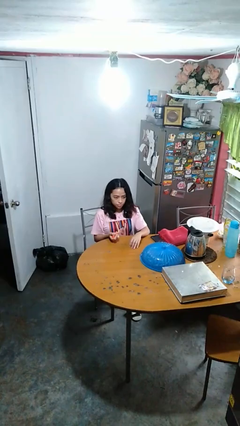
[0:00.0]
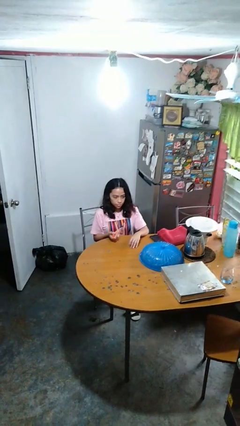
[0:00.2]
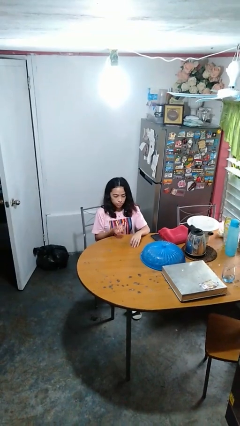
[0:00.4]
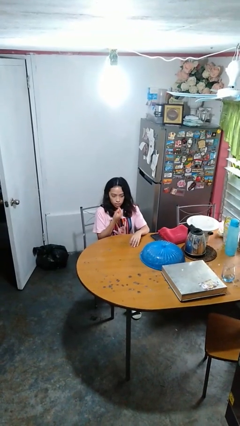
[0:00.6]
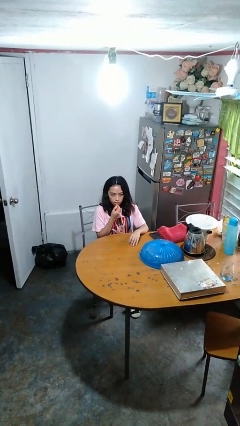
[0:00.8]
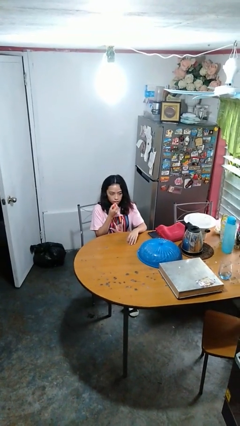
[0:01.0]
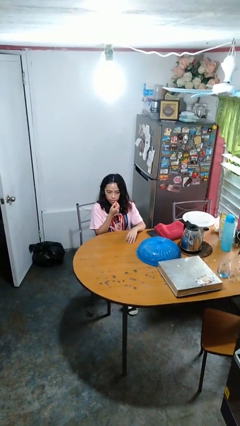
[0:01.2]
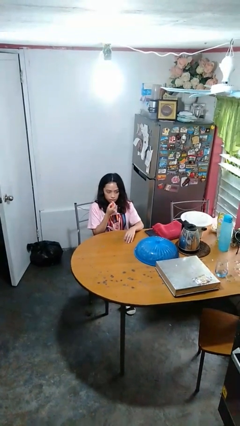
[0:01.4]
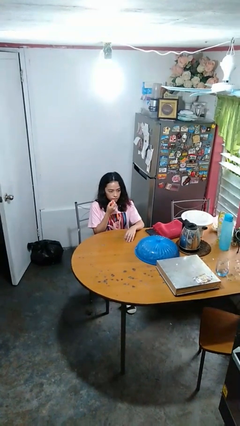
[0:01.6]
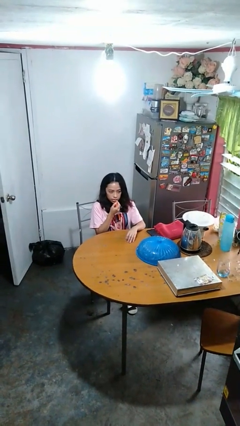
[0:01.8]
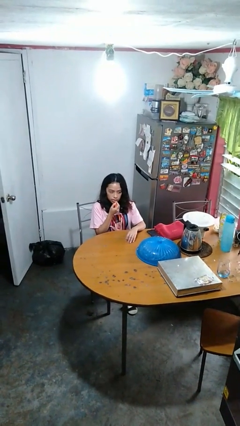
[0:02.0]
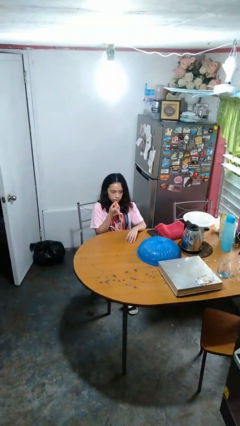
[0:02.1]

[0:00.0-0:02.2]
person applies lip makeup

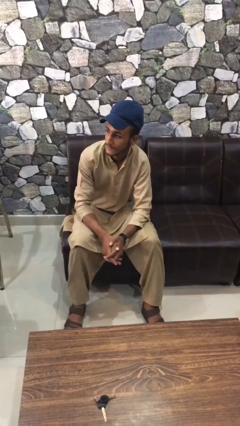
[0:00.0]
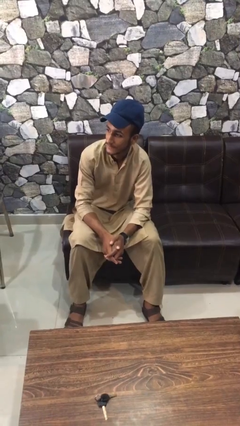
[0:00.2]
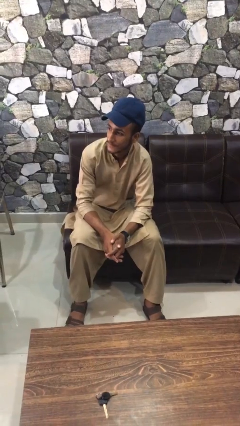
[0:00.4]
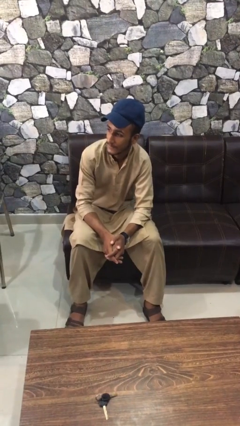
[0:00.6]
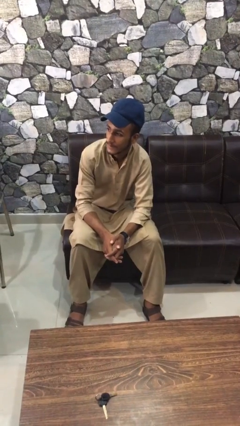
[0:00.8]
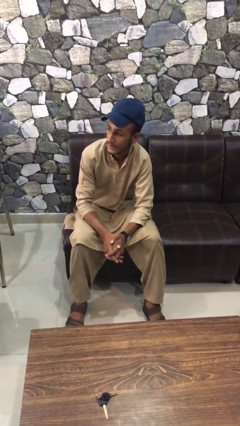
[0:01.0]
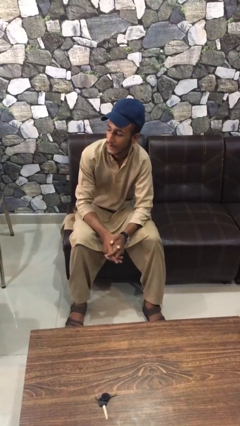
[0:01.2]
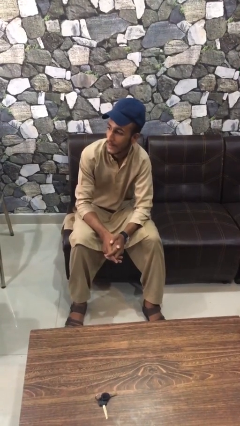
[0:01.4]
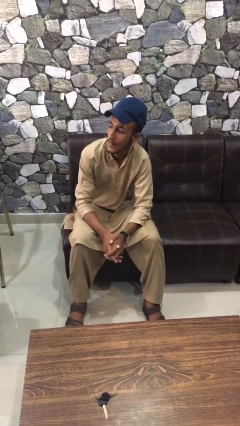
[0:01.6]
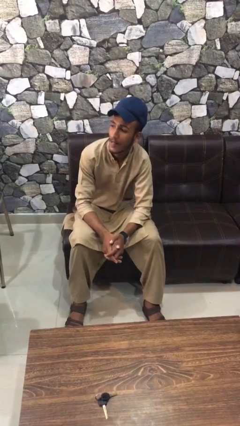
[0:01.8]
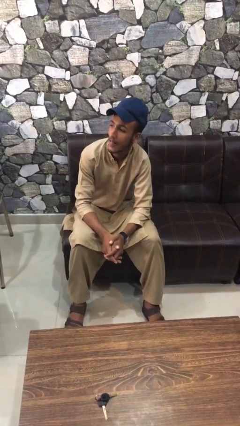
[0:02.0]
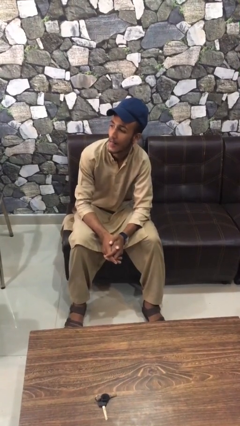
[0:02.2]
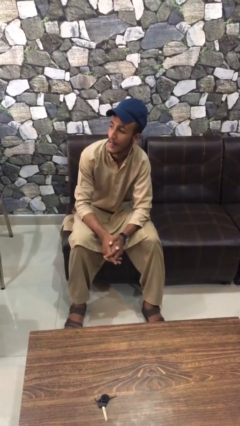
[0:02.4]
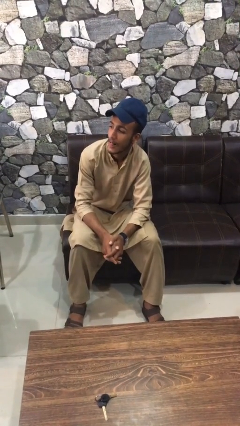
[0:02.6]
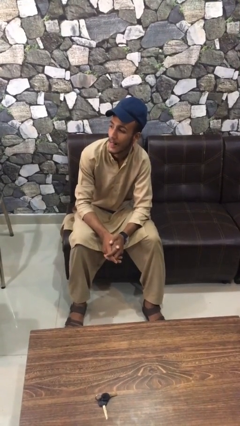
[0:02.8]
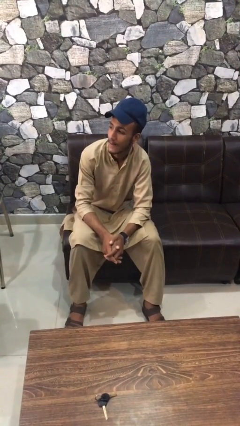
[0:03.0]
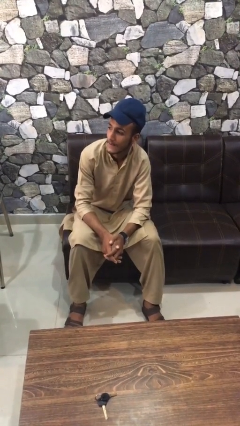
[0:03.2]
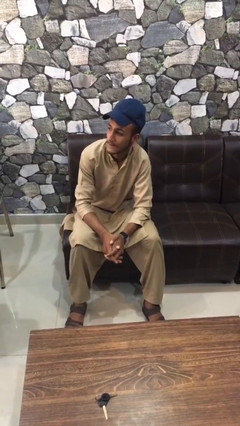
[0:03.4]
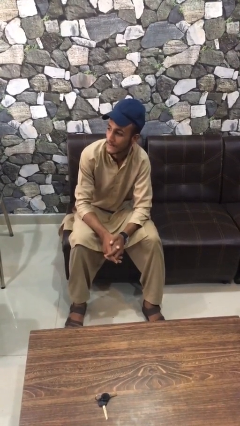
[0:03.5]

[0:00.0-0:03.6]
person sticks out tongue

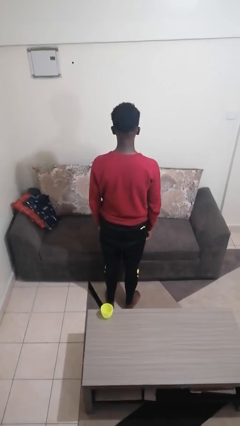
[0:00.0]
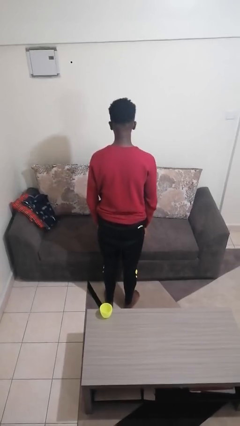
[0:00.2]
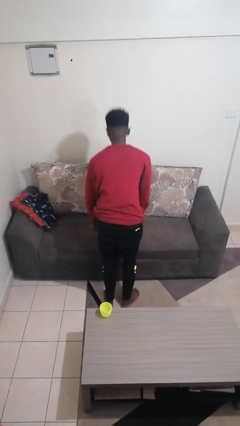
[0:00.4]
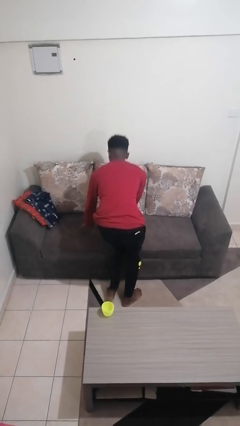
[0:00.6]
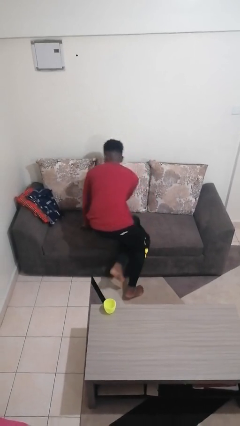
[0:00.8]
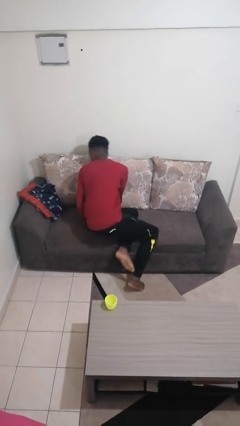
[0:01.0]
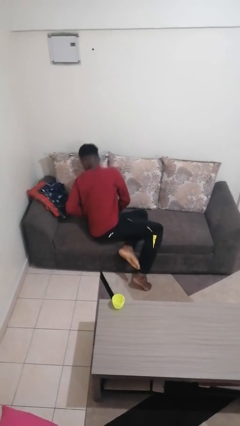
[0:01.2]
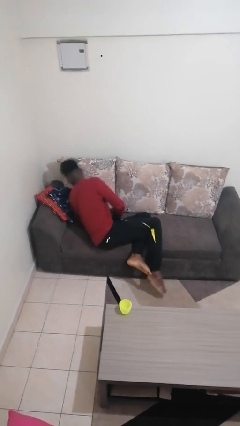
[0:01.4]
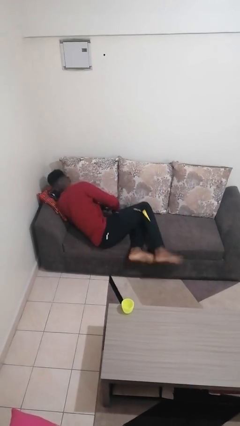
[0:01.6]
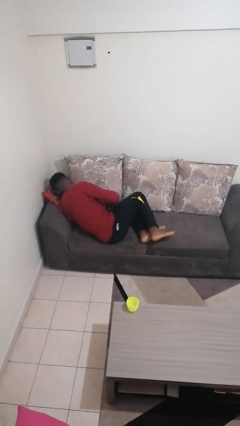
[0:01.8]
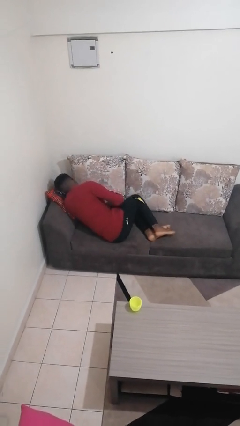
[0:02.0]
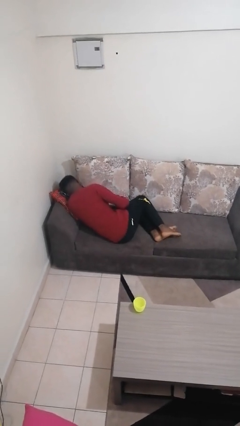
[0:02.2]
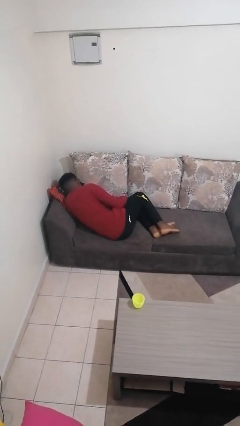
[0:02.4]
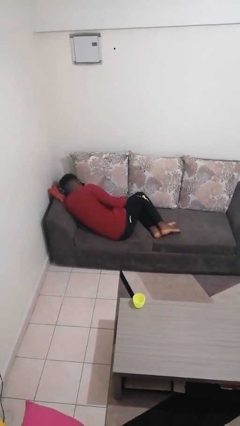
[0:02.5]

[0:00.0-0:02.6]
person lies down on couch

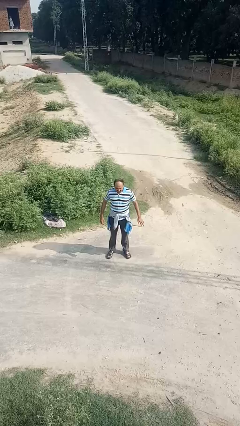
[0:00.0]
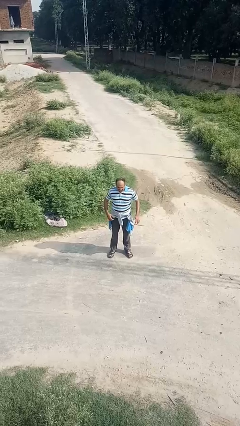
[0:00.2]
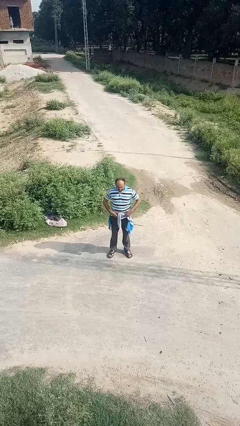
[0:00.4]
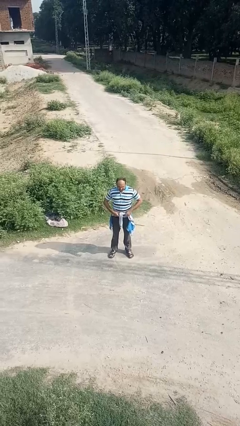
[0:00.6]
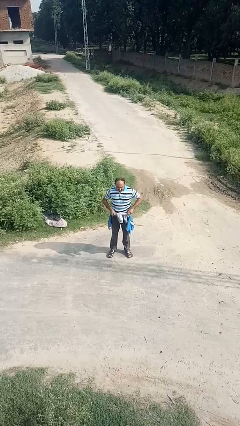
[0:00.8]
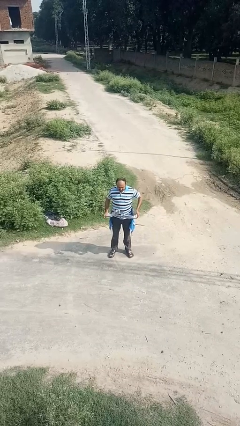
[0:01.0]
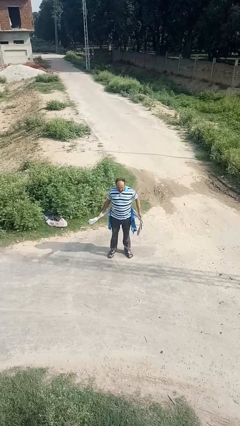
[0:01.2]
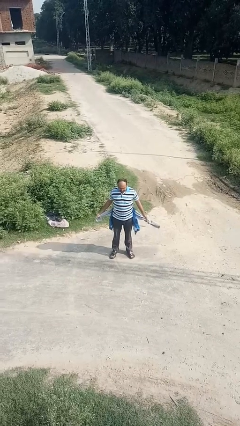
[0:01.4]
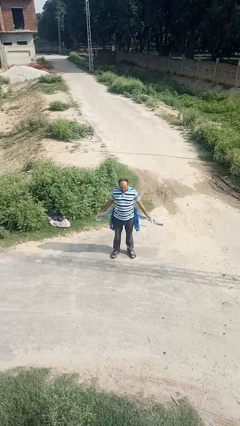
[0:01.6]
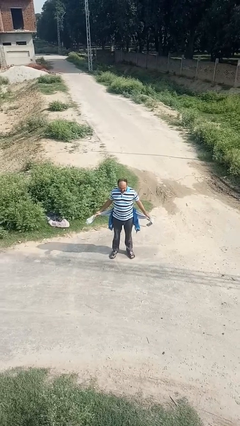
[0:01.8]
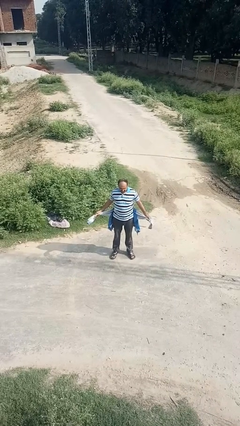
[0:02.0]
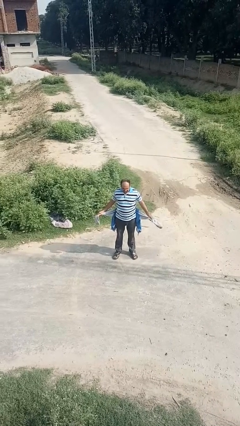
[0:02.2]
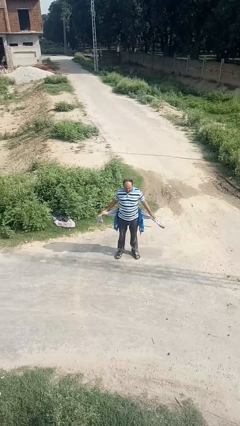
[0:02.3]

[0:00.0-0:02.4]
person unties jacket around waist

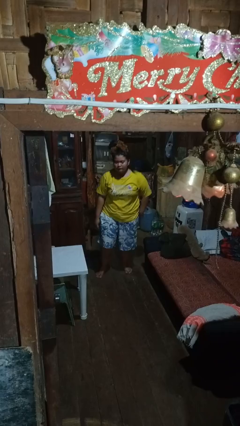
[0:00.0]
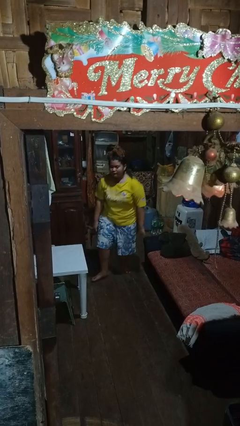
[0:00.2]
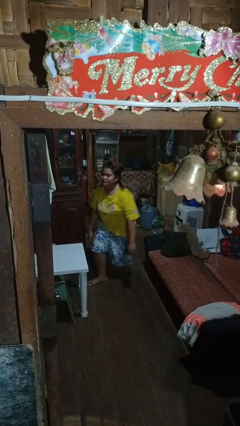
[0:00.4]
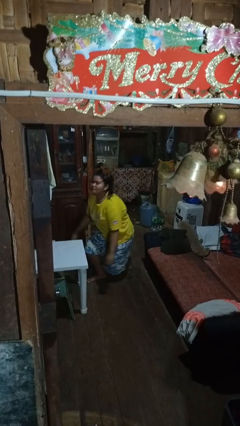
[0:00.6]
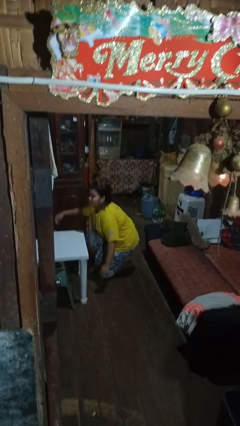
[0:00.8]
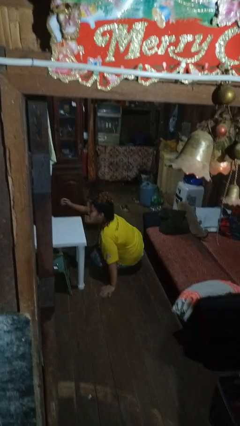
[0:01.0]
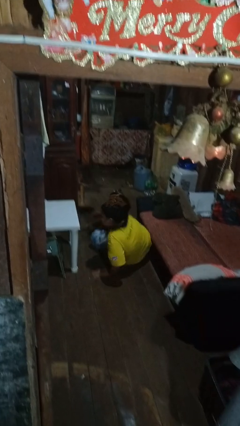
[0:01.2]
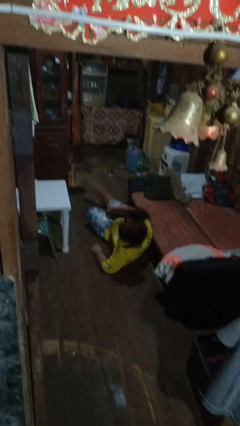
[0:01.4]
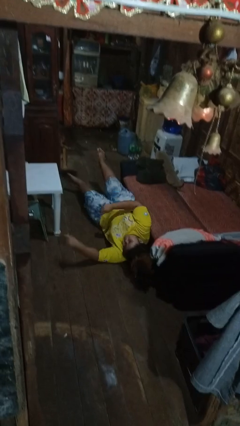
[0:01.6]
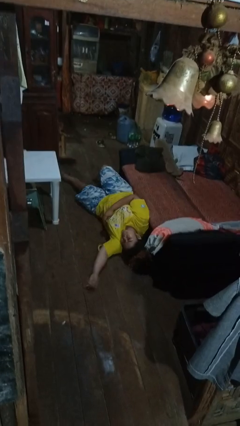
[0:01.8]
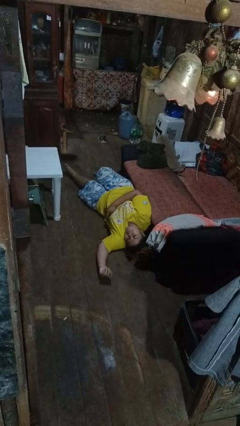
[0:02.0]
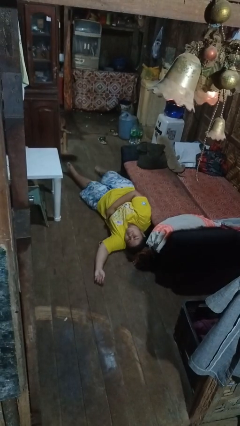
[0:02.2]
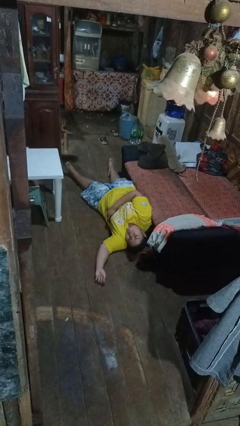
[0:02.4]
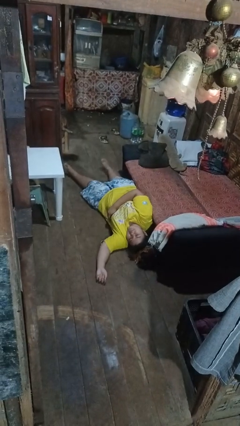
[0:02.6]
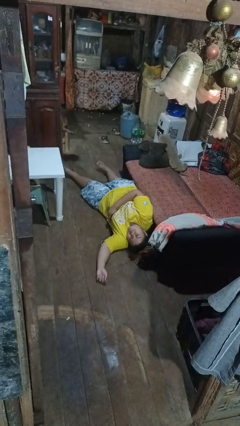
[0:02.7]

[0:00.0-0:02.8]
person falls while standing

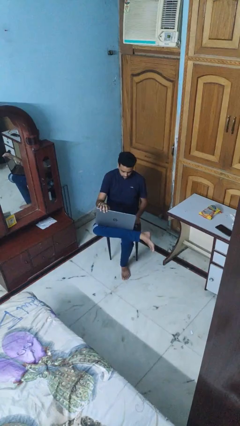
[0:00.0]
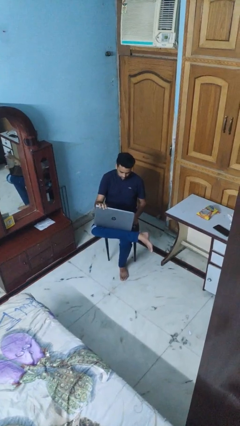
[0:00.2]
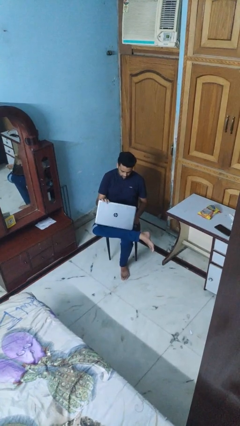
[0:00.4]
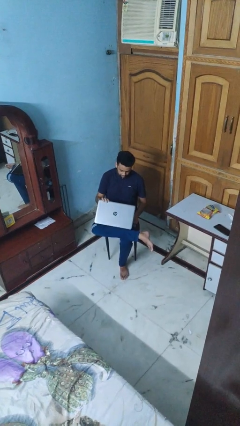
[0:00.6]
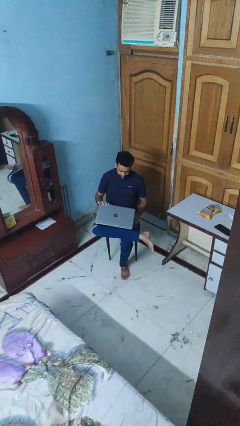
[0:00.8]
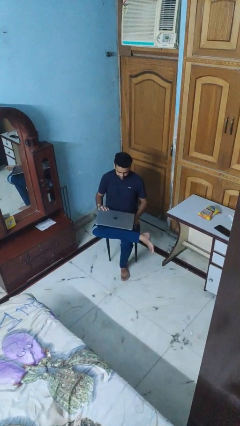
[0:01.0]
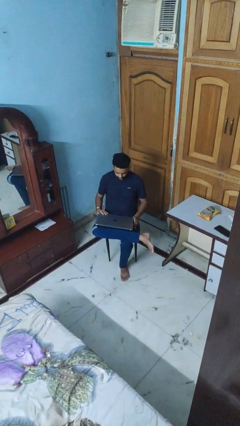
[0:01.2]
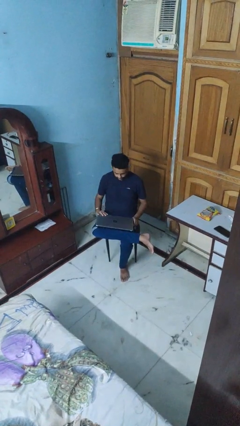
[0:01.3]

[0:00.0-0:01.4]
person closes laptop

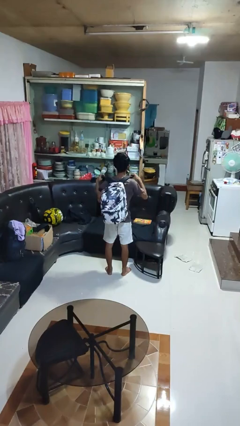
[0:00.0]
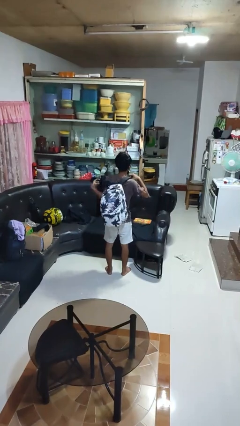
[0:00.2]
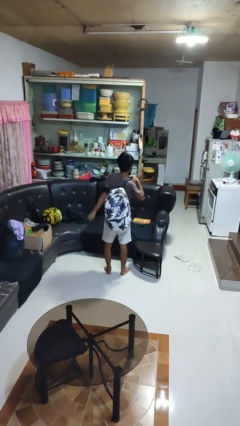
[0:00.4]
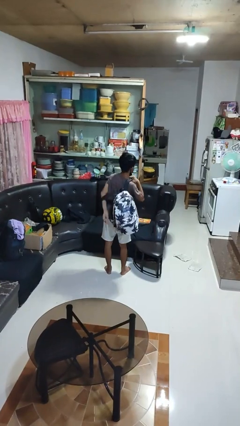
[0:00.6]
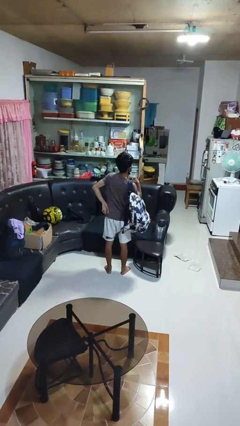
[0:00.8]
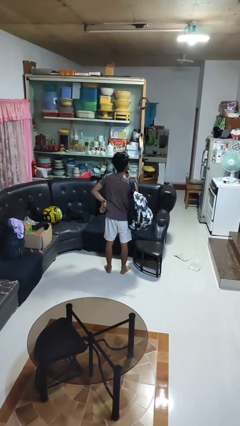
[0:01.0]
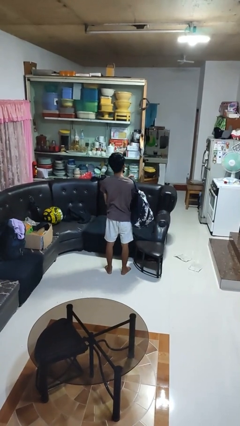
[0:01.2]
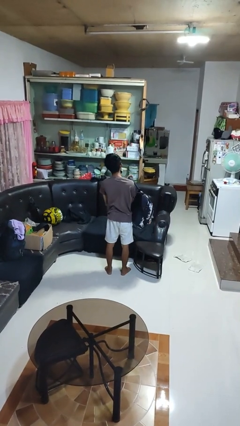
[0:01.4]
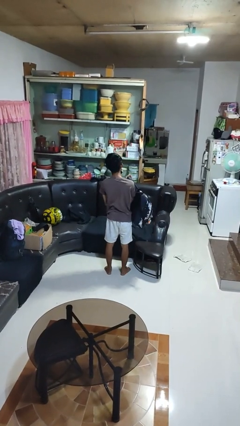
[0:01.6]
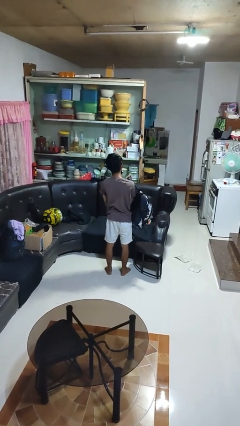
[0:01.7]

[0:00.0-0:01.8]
person takes off backpack

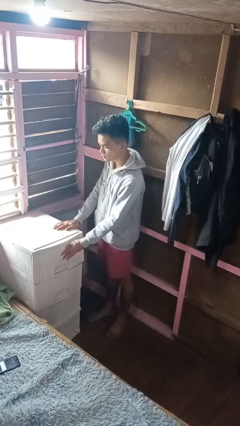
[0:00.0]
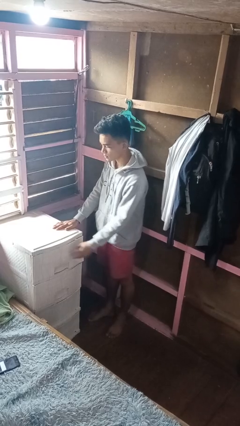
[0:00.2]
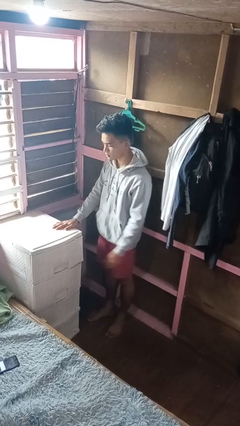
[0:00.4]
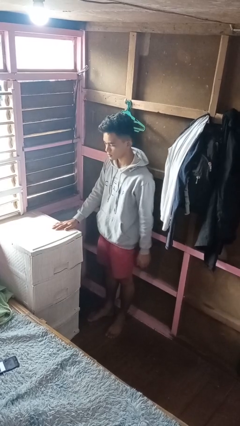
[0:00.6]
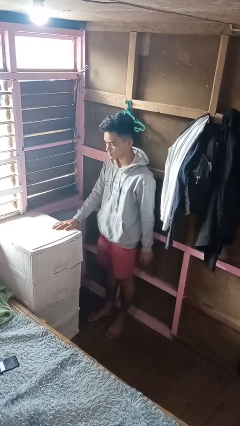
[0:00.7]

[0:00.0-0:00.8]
person closes dresser drawer
